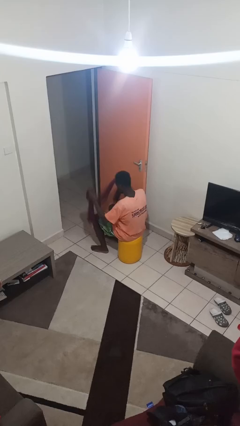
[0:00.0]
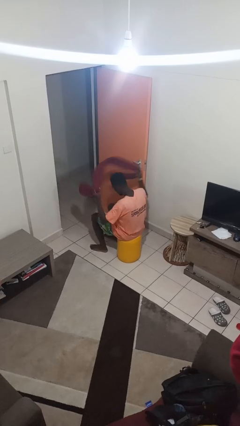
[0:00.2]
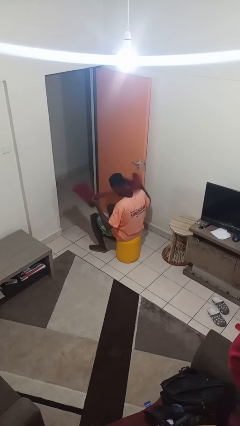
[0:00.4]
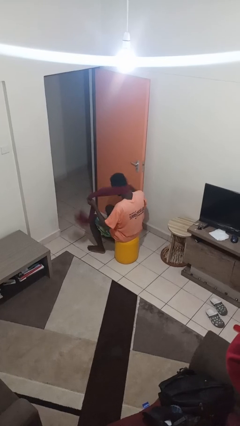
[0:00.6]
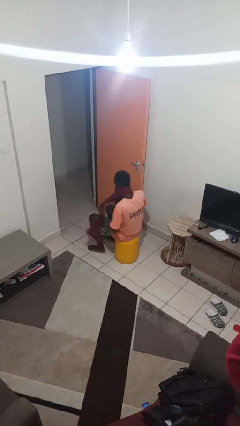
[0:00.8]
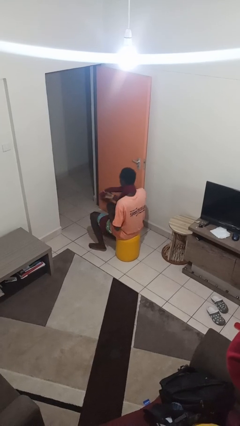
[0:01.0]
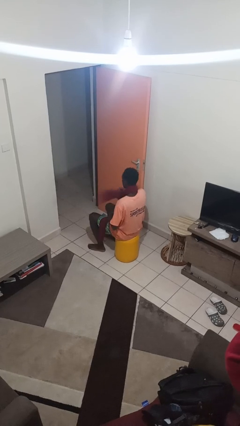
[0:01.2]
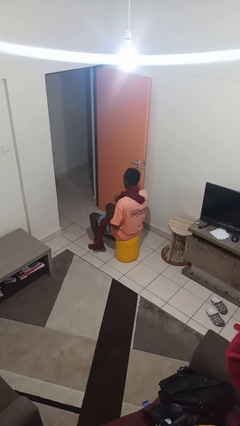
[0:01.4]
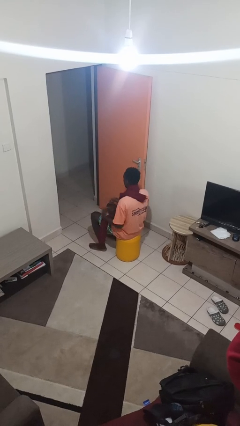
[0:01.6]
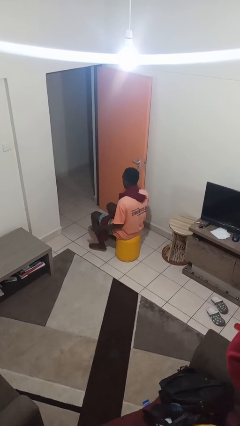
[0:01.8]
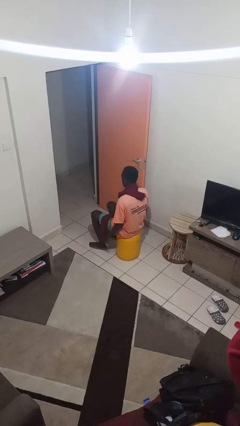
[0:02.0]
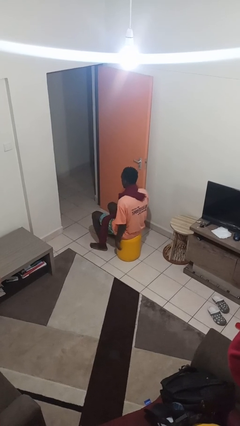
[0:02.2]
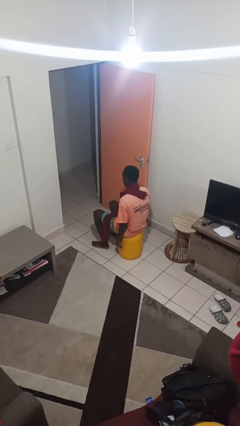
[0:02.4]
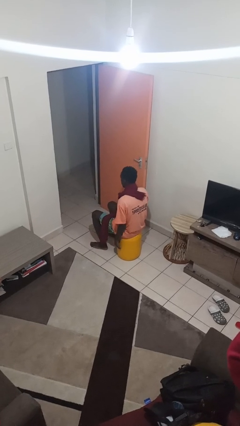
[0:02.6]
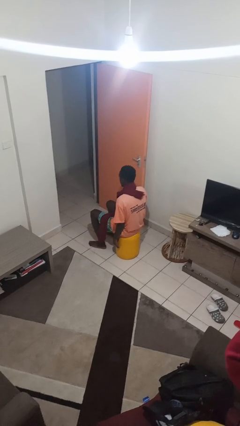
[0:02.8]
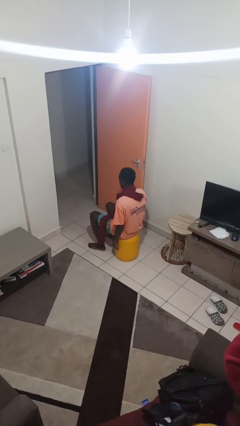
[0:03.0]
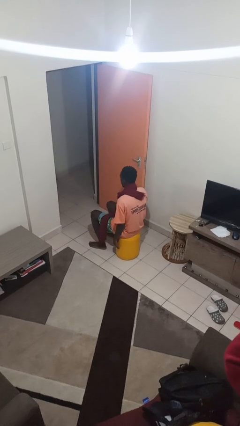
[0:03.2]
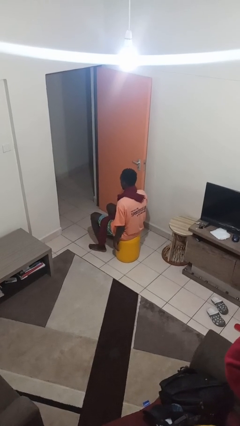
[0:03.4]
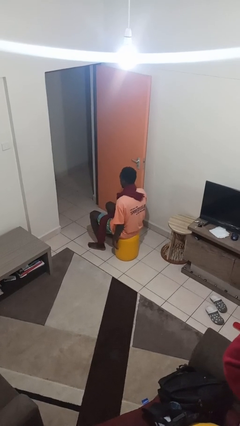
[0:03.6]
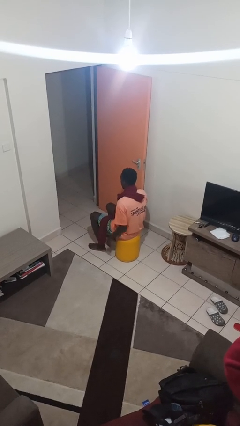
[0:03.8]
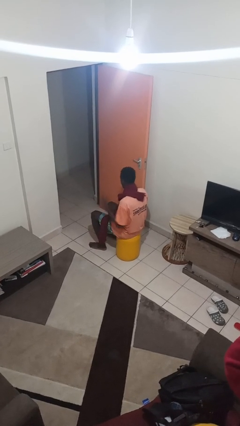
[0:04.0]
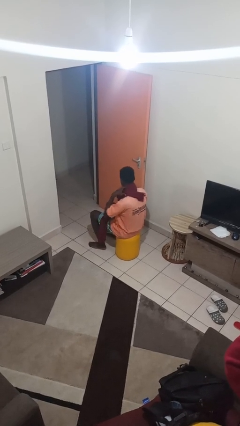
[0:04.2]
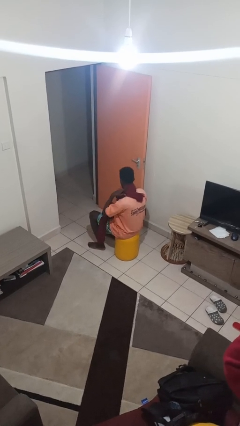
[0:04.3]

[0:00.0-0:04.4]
person puts on scarf

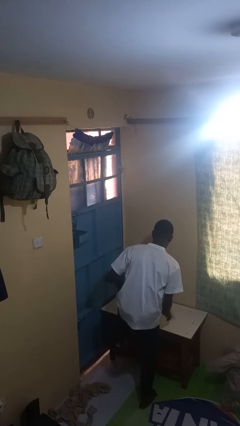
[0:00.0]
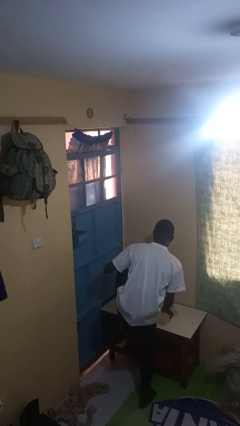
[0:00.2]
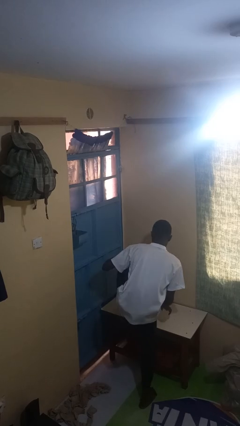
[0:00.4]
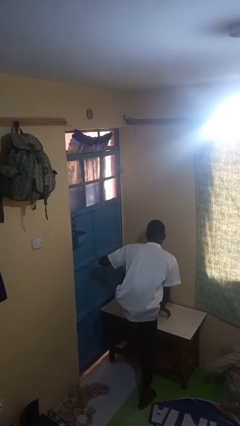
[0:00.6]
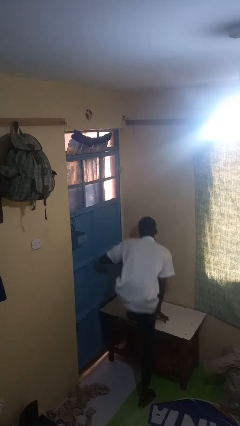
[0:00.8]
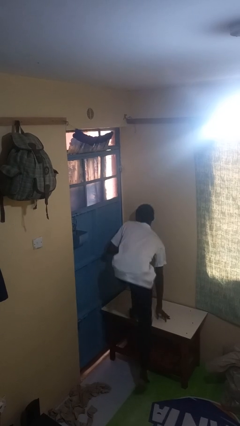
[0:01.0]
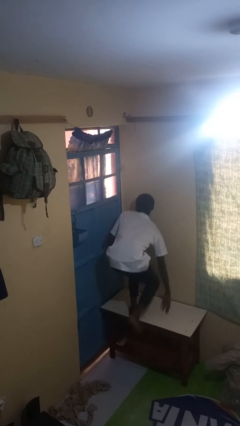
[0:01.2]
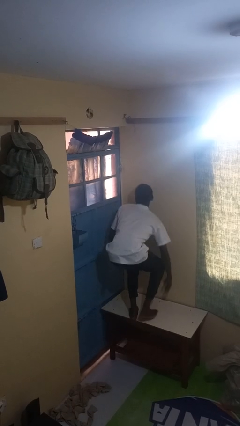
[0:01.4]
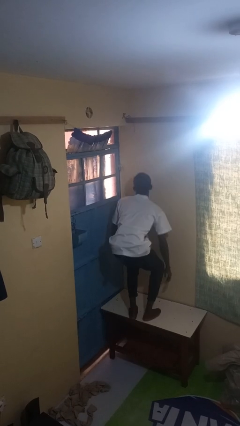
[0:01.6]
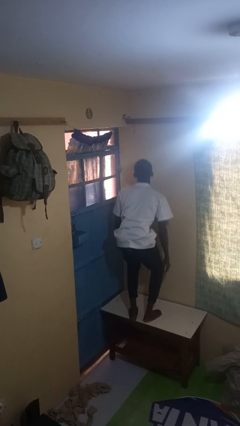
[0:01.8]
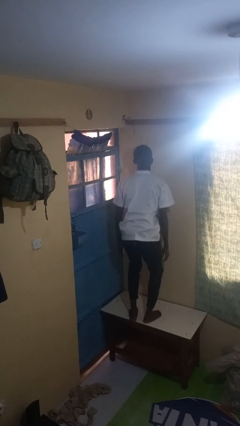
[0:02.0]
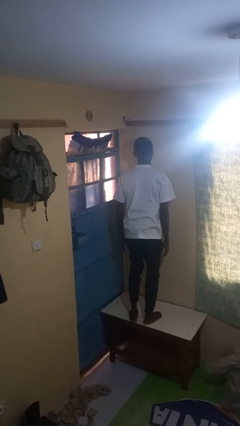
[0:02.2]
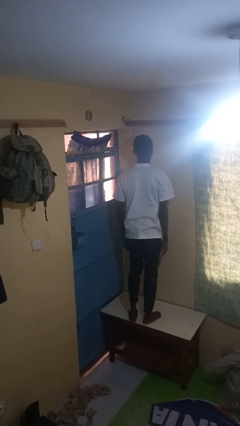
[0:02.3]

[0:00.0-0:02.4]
person climbs on table

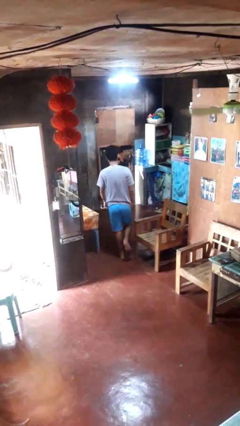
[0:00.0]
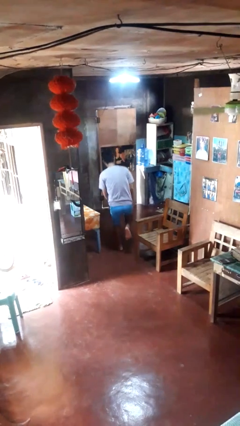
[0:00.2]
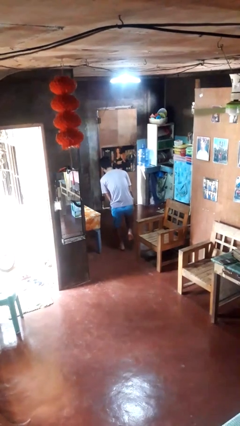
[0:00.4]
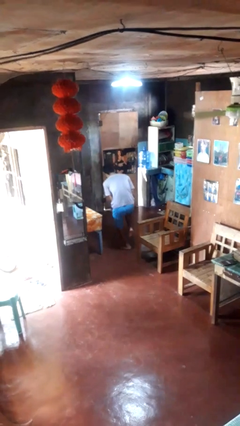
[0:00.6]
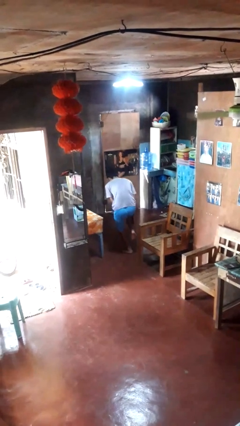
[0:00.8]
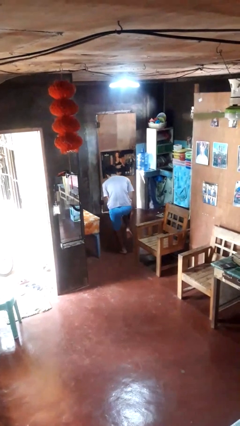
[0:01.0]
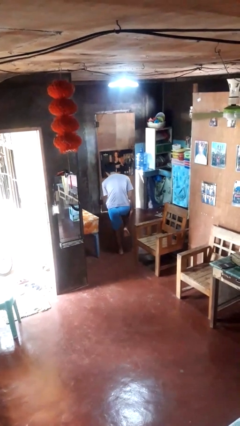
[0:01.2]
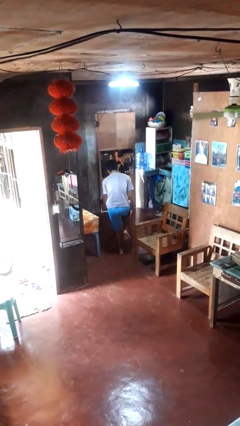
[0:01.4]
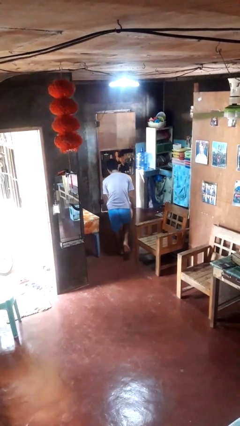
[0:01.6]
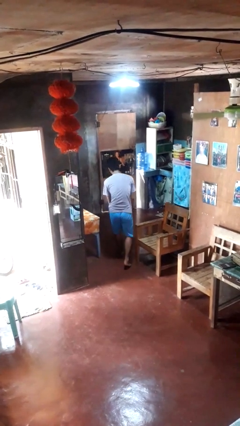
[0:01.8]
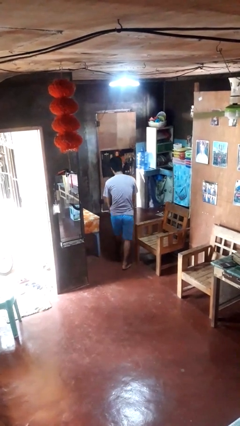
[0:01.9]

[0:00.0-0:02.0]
person stubs toe

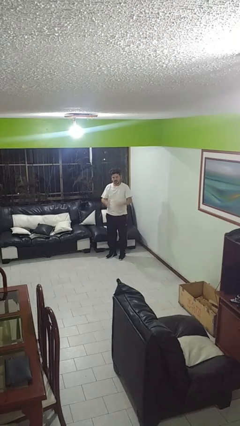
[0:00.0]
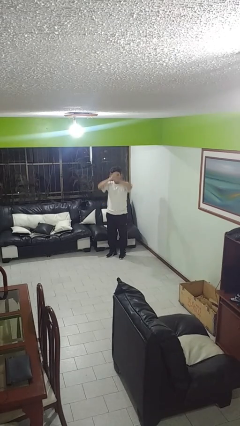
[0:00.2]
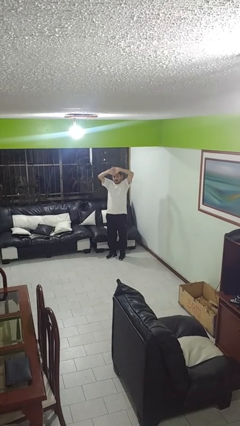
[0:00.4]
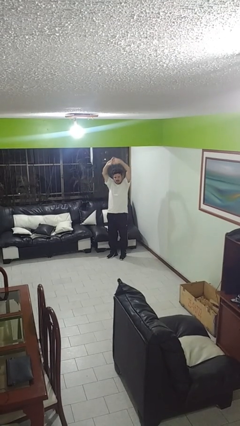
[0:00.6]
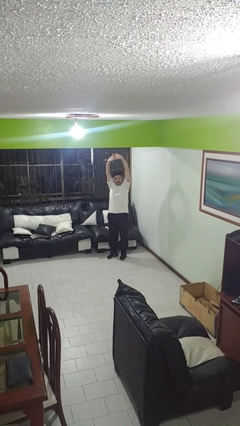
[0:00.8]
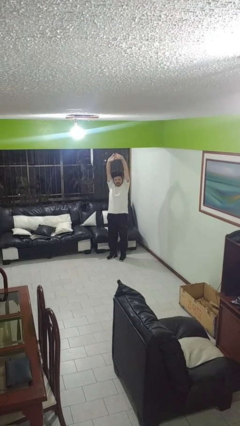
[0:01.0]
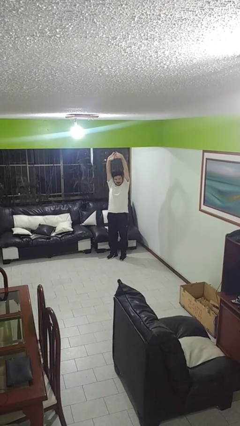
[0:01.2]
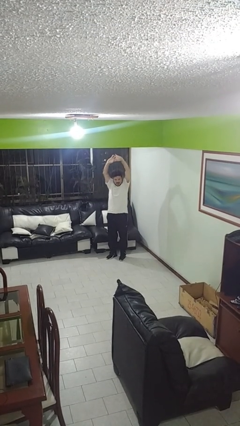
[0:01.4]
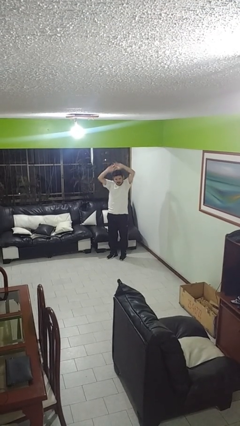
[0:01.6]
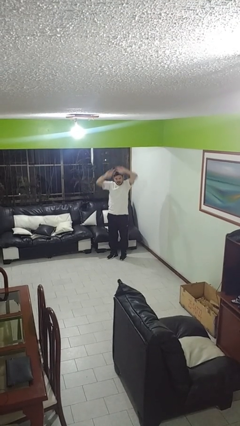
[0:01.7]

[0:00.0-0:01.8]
person stretches arms over head

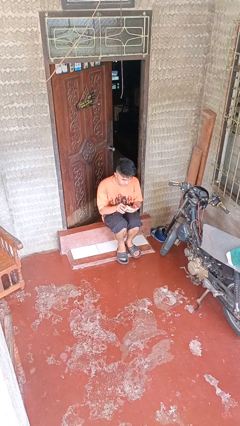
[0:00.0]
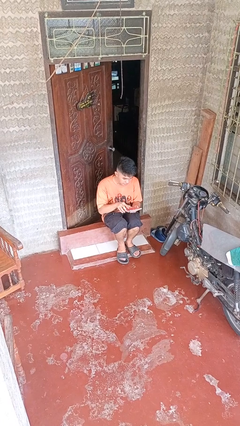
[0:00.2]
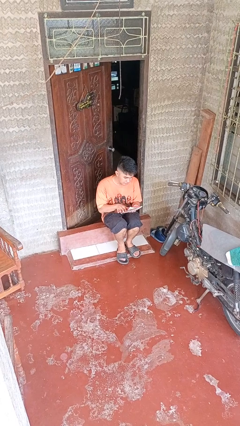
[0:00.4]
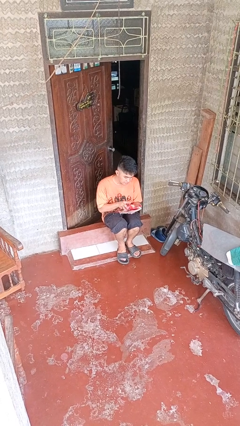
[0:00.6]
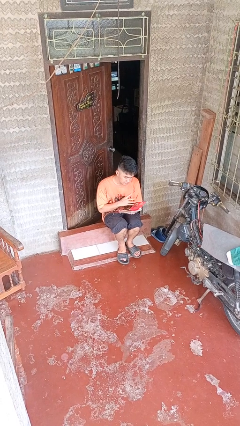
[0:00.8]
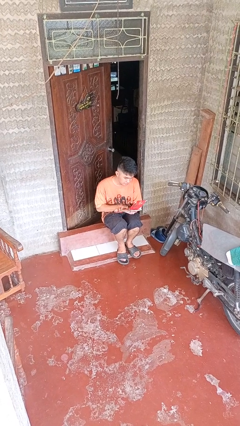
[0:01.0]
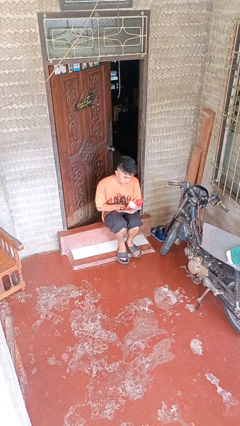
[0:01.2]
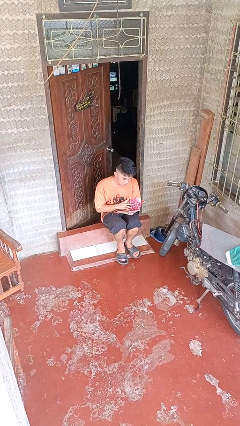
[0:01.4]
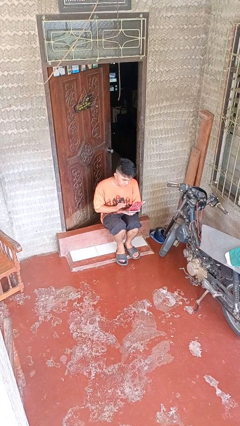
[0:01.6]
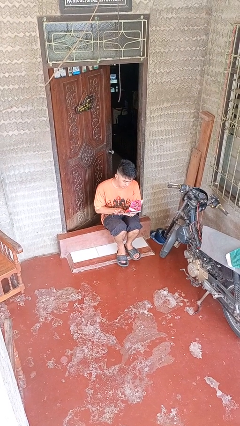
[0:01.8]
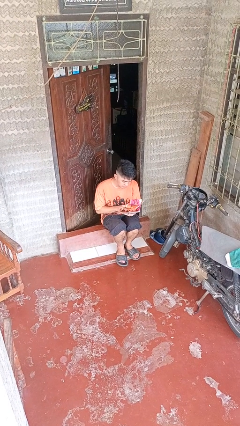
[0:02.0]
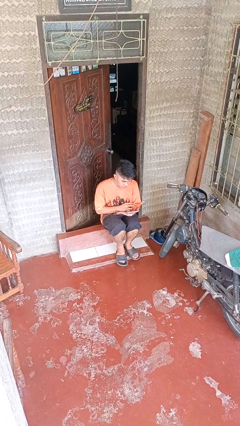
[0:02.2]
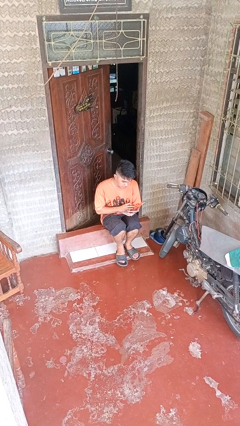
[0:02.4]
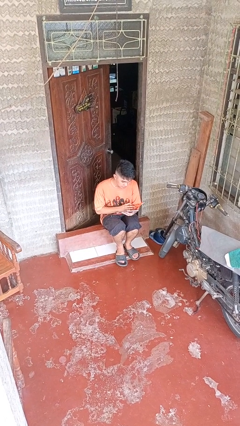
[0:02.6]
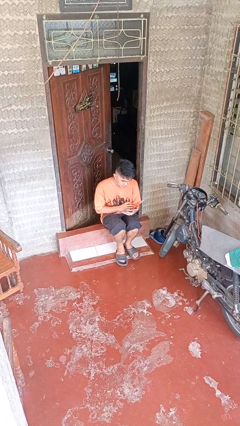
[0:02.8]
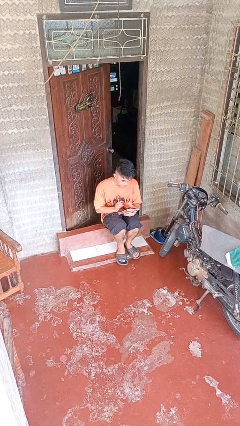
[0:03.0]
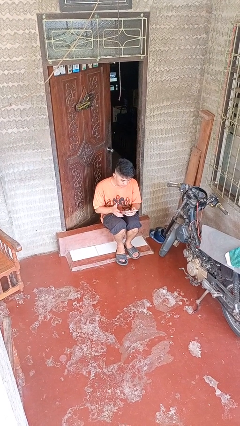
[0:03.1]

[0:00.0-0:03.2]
person reads magazine

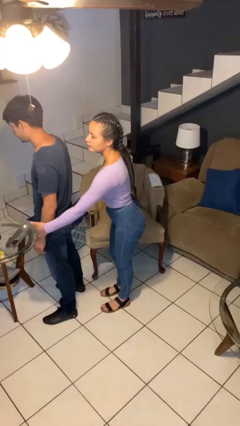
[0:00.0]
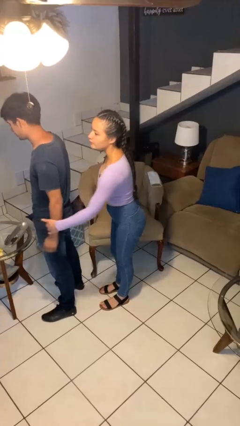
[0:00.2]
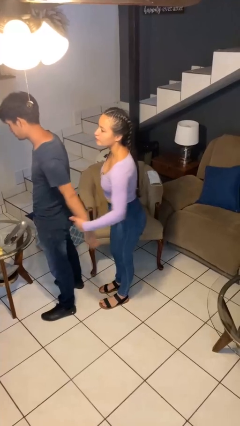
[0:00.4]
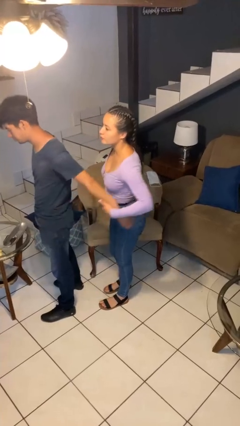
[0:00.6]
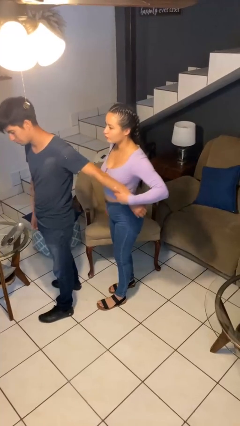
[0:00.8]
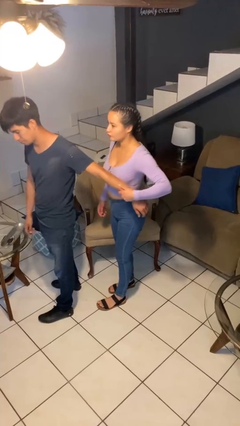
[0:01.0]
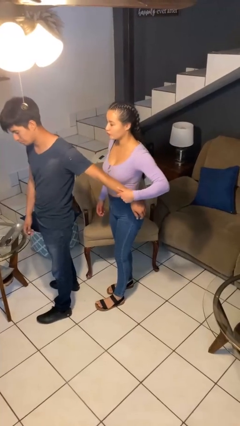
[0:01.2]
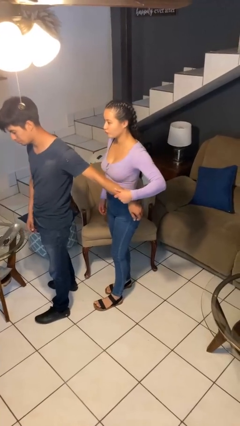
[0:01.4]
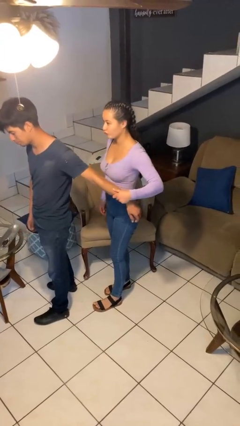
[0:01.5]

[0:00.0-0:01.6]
person grabs person by forearm

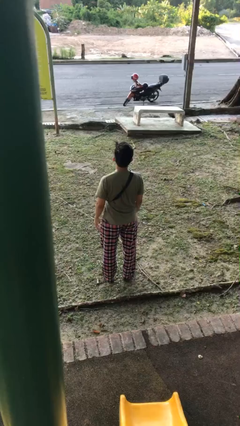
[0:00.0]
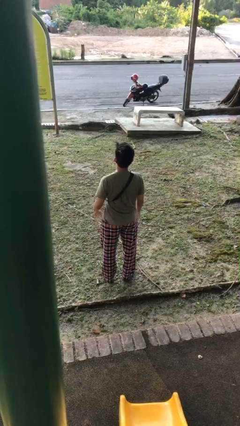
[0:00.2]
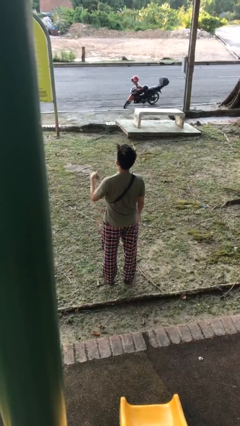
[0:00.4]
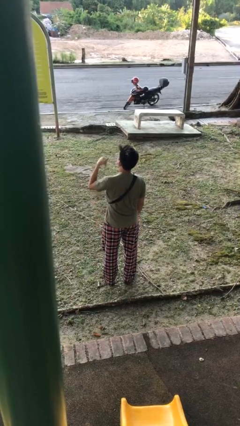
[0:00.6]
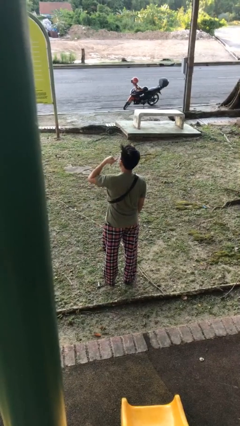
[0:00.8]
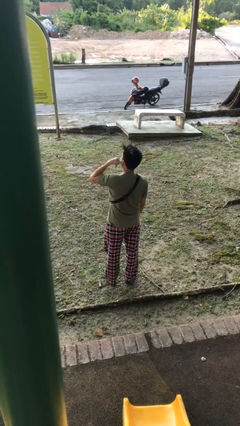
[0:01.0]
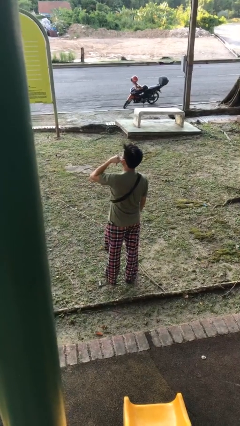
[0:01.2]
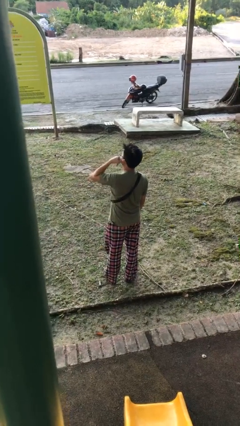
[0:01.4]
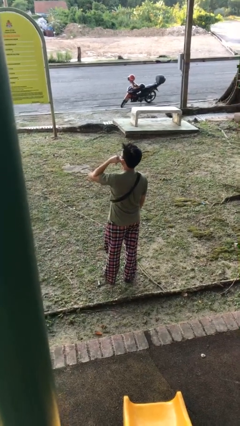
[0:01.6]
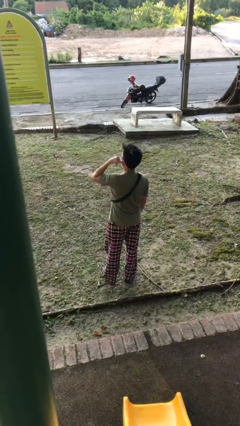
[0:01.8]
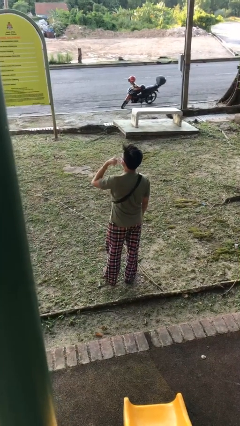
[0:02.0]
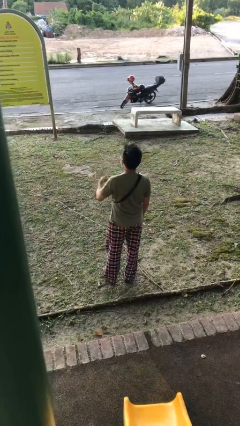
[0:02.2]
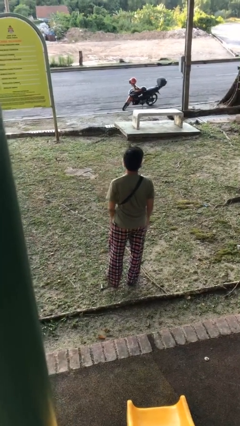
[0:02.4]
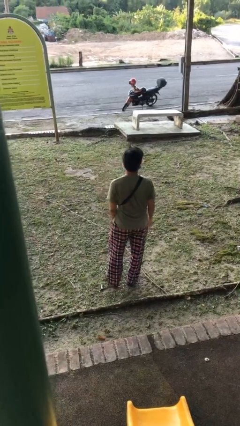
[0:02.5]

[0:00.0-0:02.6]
person gestures call me
